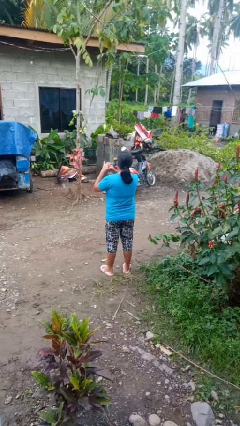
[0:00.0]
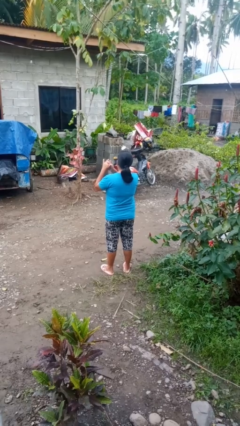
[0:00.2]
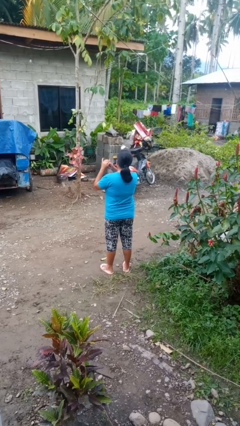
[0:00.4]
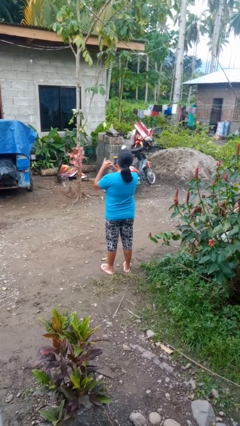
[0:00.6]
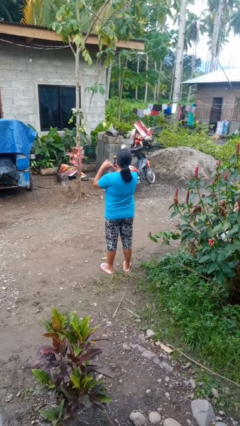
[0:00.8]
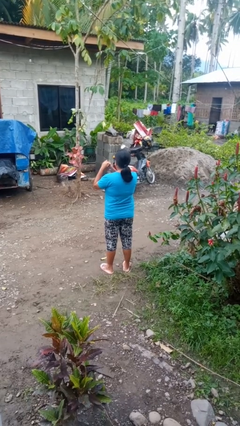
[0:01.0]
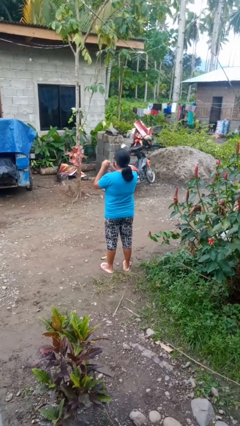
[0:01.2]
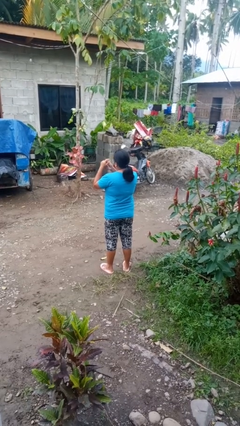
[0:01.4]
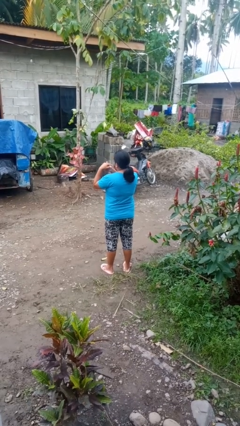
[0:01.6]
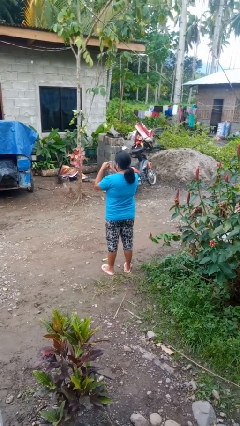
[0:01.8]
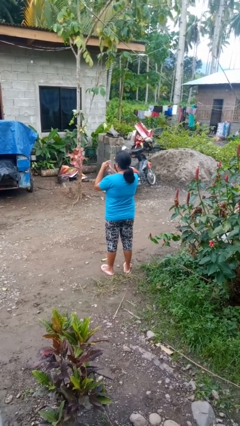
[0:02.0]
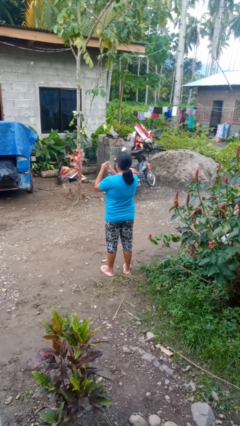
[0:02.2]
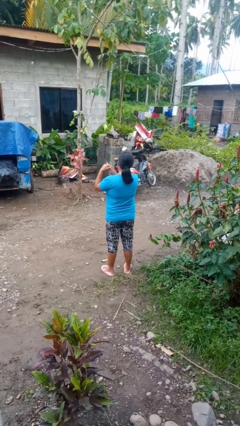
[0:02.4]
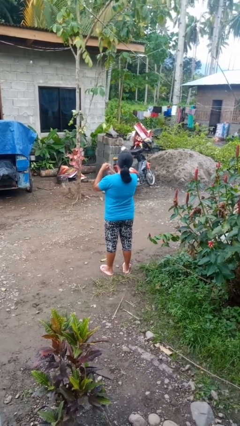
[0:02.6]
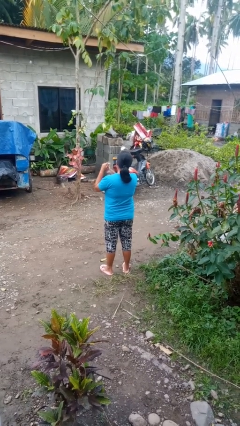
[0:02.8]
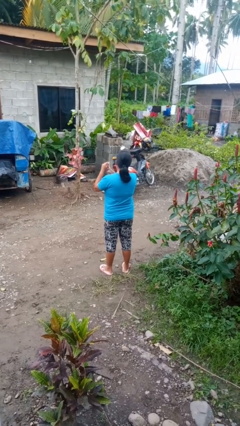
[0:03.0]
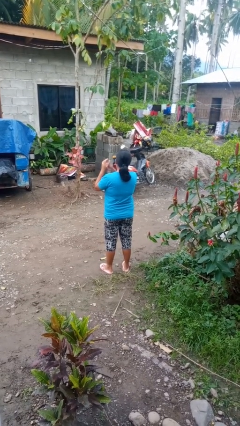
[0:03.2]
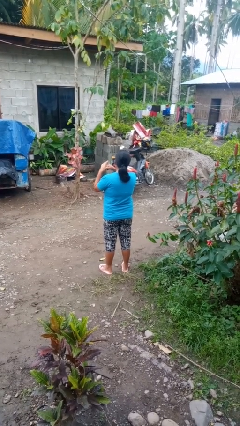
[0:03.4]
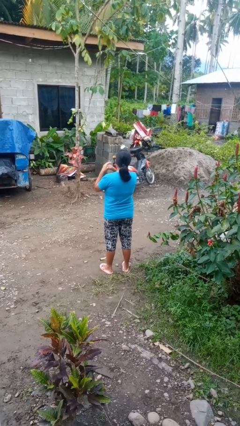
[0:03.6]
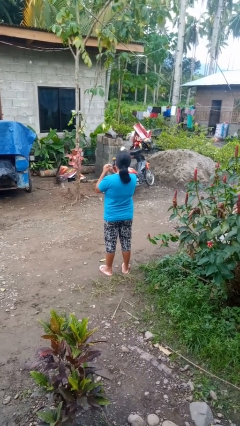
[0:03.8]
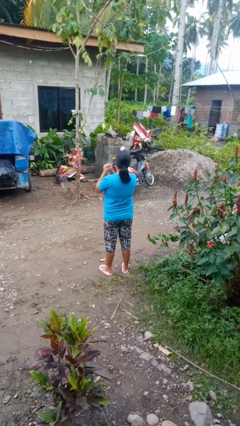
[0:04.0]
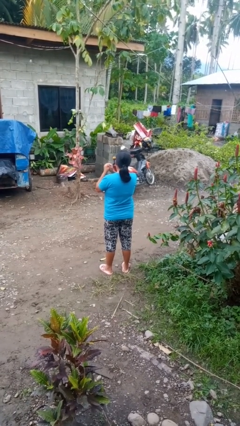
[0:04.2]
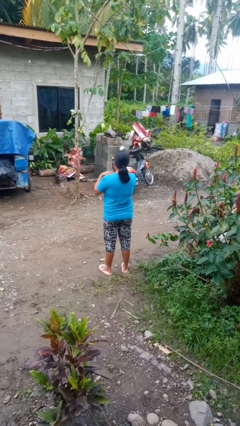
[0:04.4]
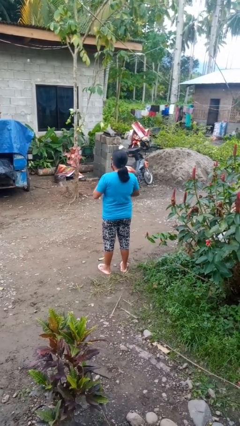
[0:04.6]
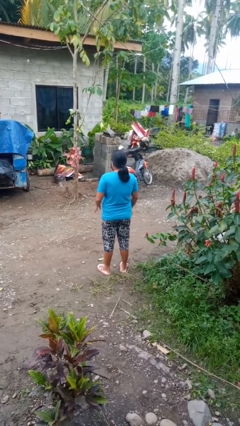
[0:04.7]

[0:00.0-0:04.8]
person cracks knuckles

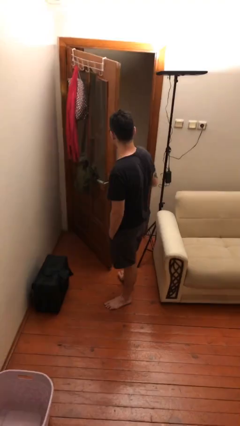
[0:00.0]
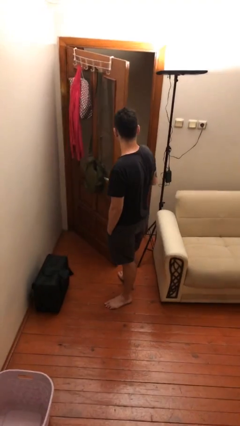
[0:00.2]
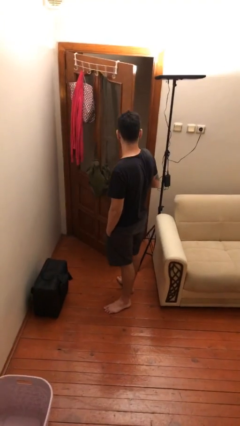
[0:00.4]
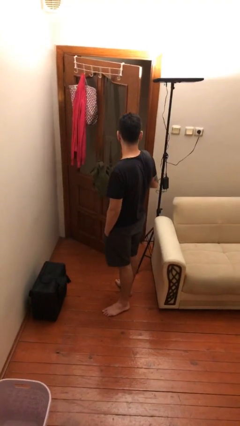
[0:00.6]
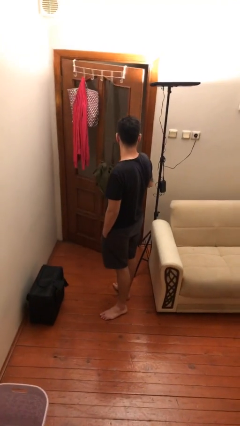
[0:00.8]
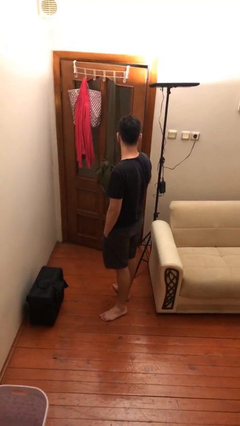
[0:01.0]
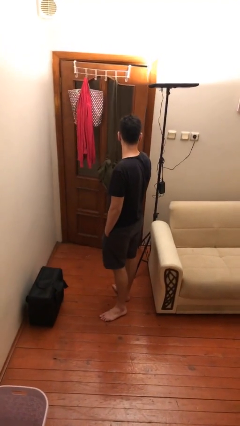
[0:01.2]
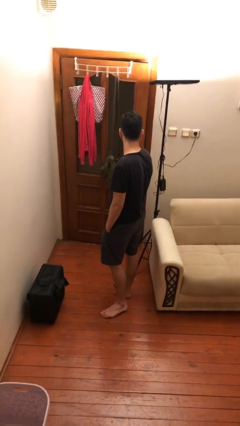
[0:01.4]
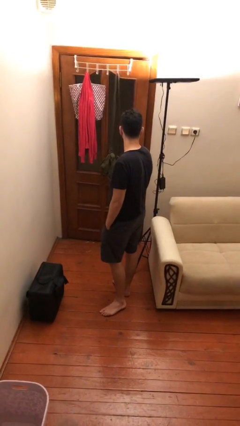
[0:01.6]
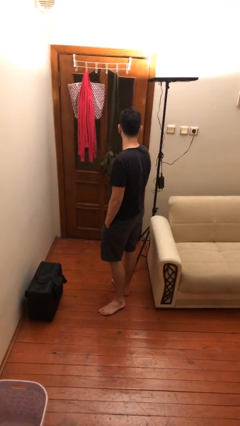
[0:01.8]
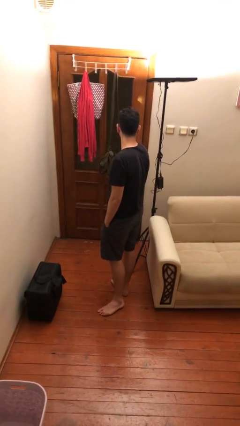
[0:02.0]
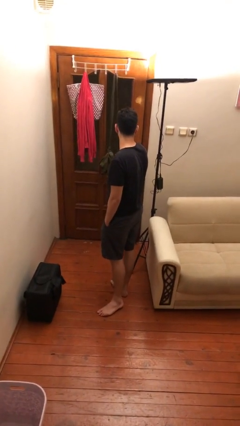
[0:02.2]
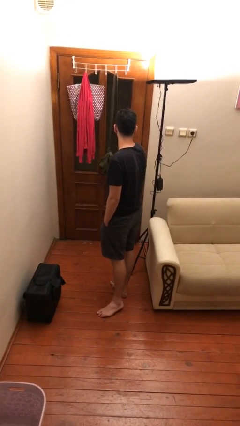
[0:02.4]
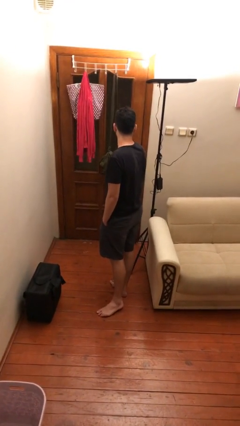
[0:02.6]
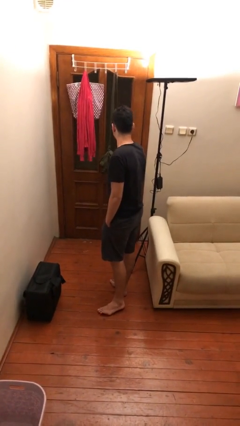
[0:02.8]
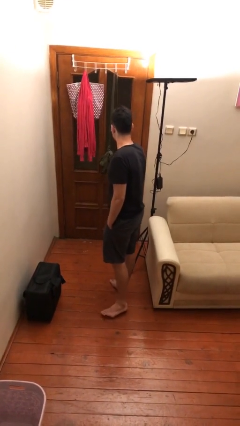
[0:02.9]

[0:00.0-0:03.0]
person closes facility door

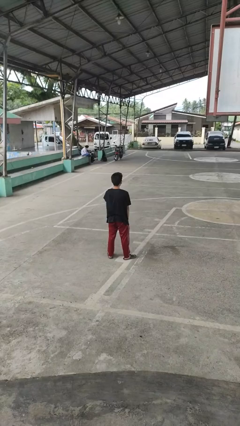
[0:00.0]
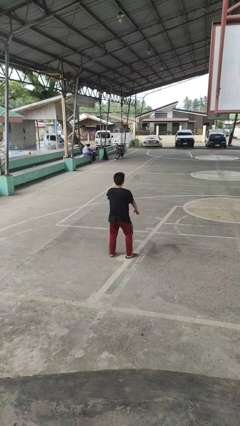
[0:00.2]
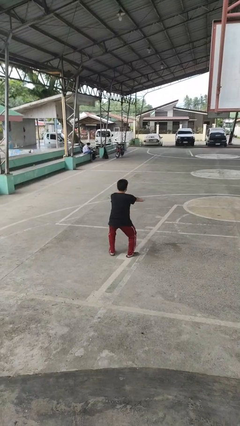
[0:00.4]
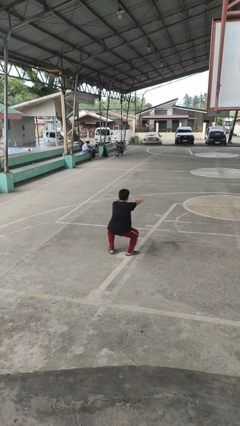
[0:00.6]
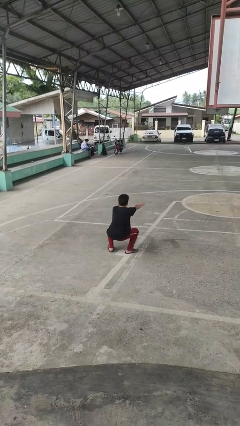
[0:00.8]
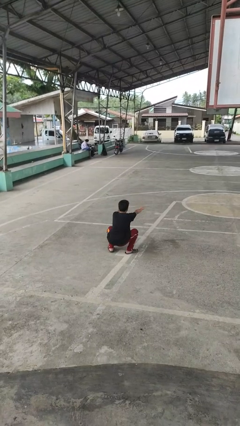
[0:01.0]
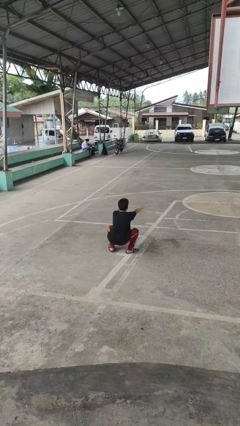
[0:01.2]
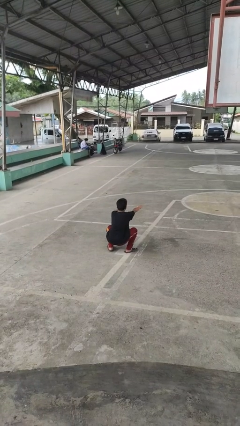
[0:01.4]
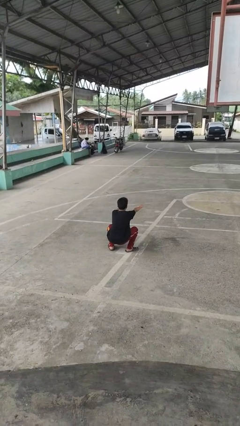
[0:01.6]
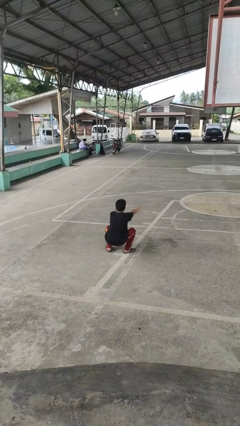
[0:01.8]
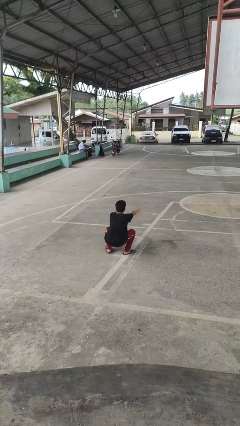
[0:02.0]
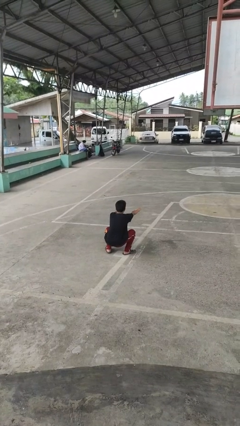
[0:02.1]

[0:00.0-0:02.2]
person squats

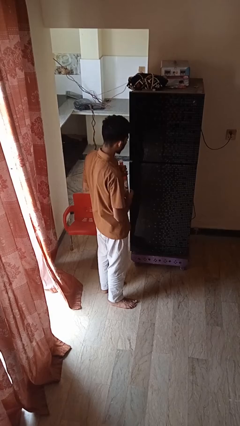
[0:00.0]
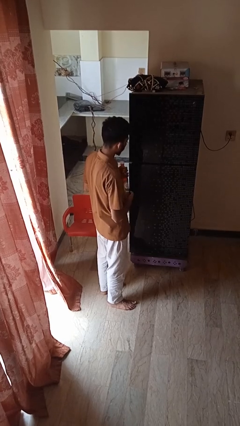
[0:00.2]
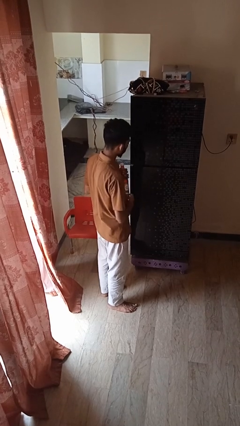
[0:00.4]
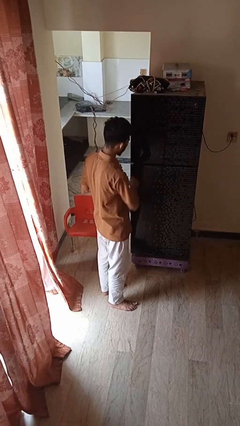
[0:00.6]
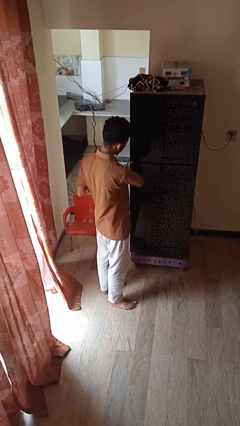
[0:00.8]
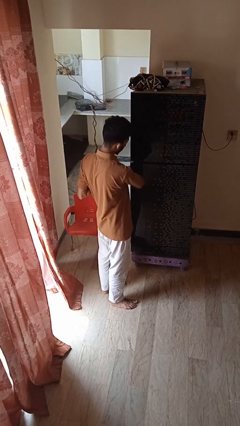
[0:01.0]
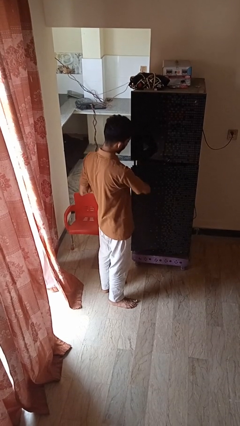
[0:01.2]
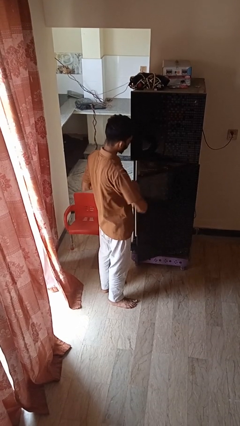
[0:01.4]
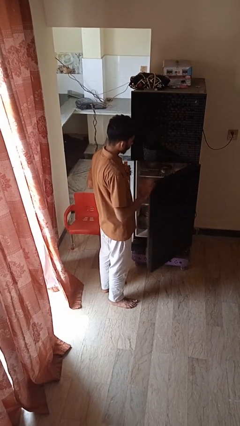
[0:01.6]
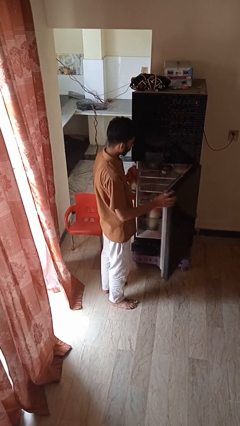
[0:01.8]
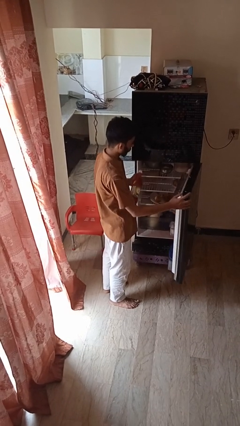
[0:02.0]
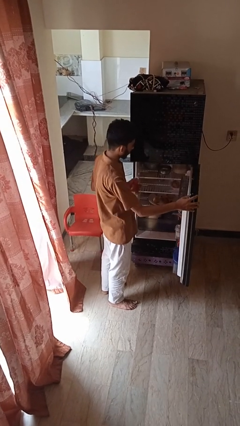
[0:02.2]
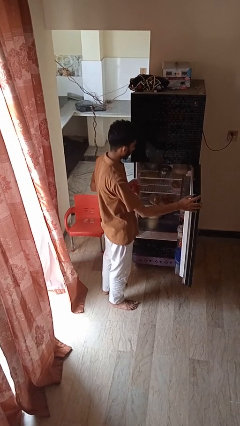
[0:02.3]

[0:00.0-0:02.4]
person opens refrigerator

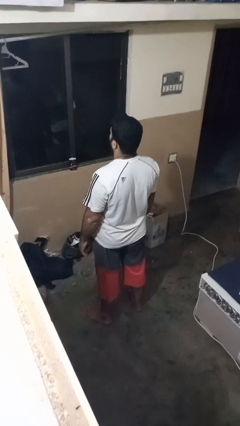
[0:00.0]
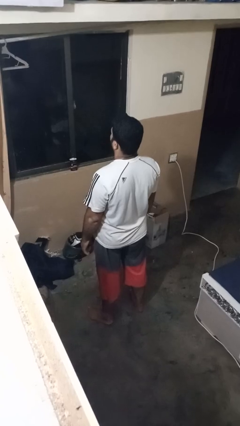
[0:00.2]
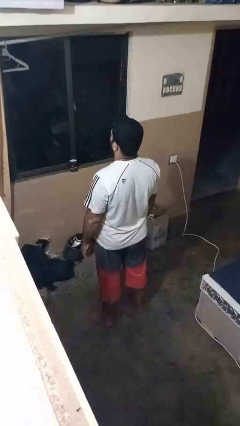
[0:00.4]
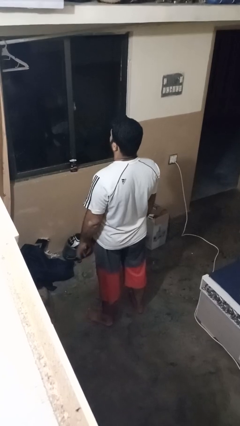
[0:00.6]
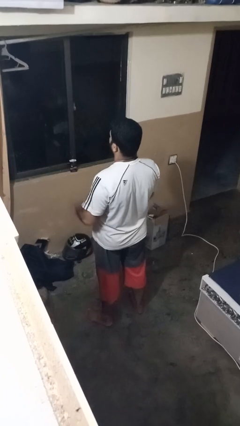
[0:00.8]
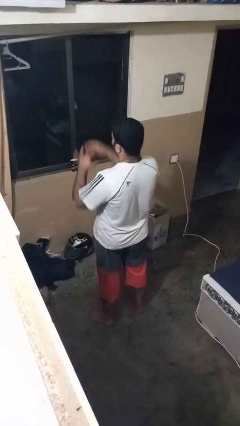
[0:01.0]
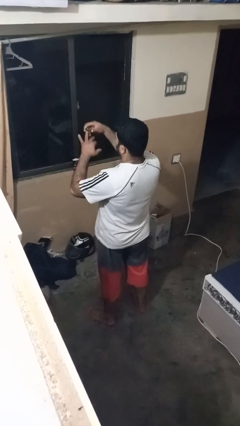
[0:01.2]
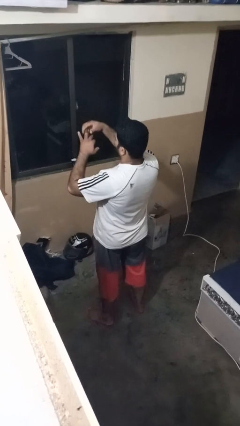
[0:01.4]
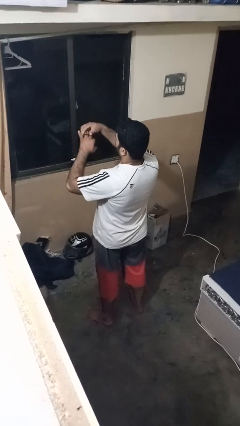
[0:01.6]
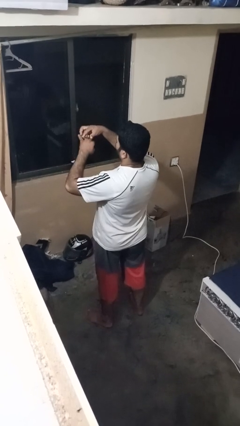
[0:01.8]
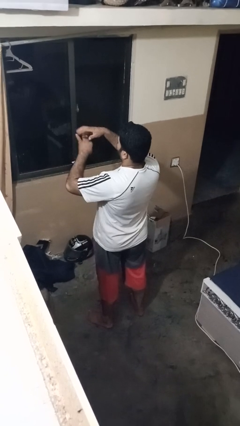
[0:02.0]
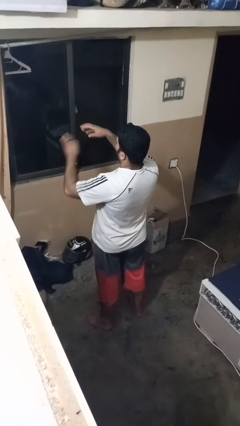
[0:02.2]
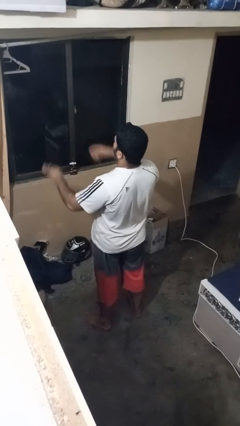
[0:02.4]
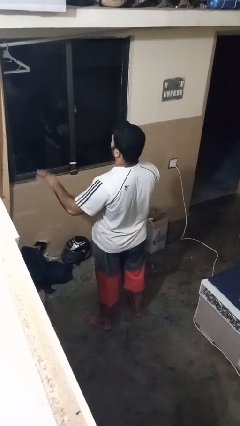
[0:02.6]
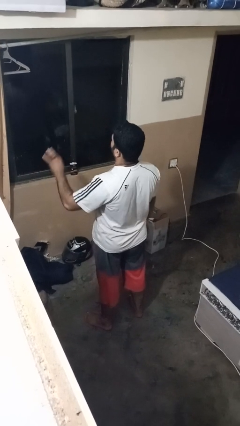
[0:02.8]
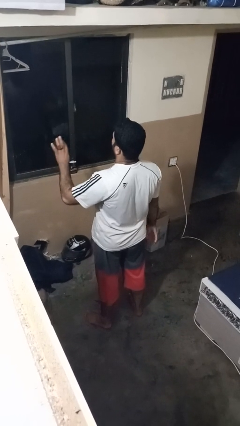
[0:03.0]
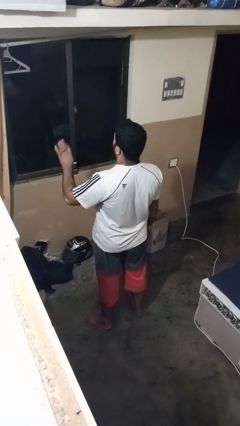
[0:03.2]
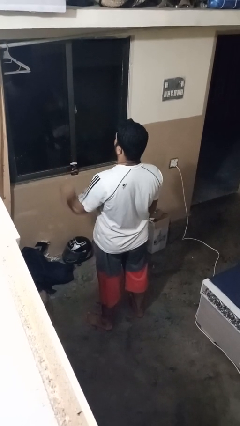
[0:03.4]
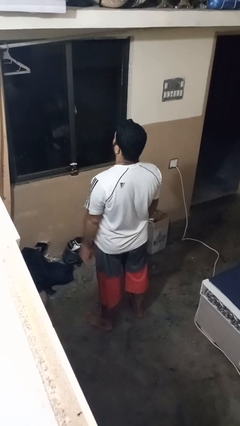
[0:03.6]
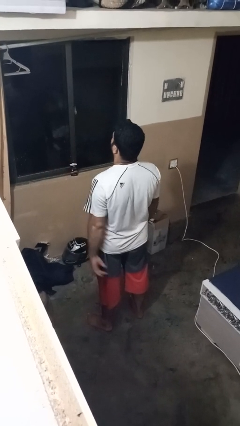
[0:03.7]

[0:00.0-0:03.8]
person puts on ring

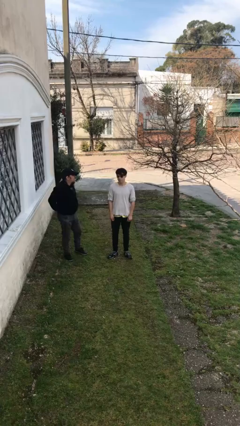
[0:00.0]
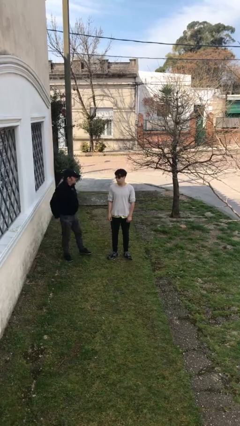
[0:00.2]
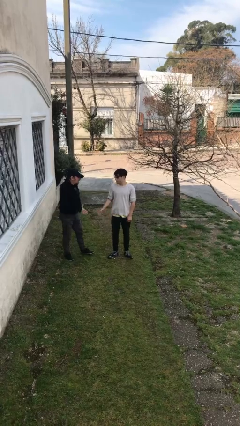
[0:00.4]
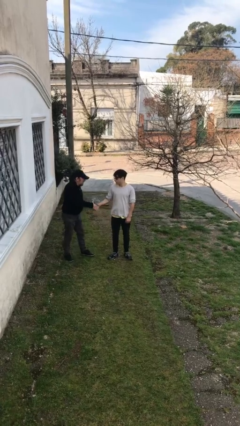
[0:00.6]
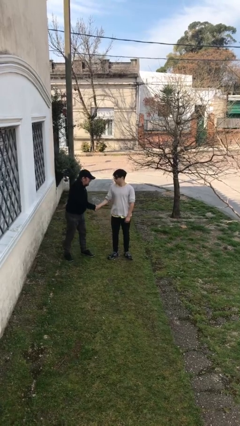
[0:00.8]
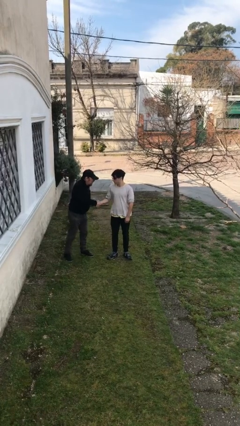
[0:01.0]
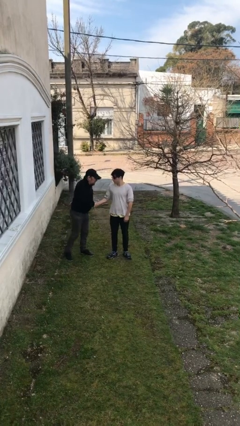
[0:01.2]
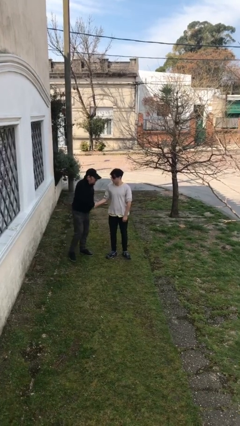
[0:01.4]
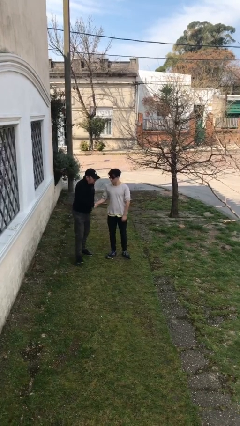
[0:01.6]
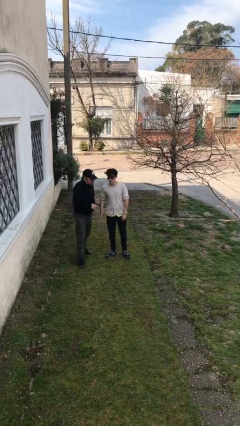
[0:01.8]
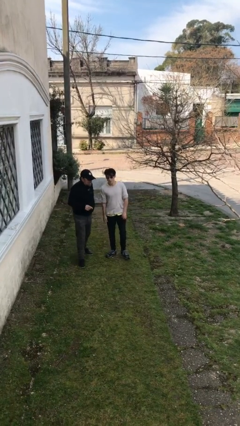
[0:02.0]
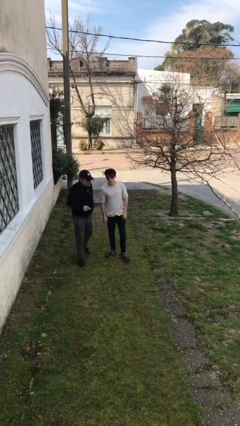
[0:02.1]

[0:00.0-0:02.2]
person shakes hand
